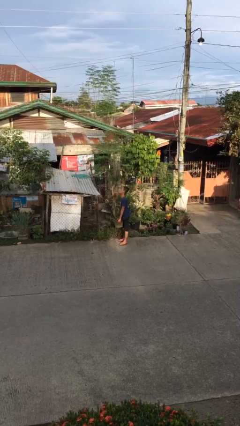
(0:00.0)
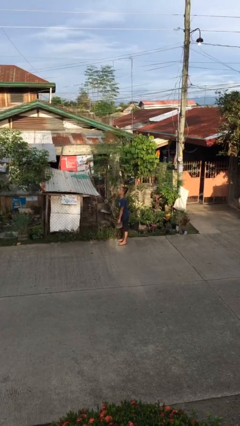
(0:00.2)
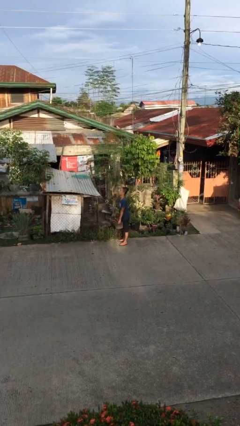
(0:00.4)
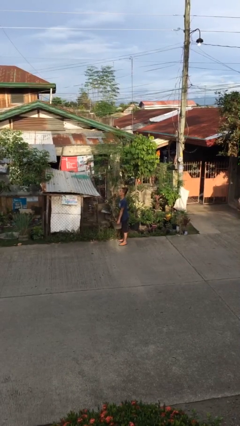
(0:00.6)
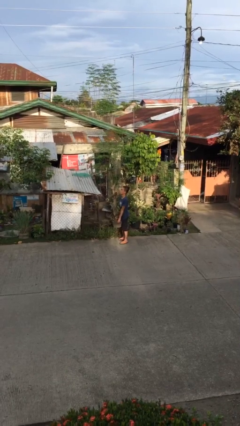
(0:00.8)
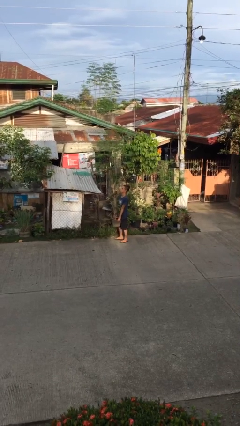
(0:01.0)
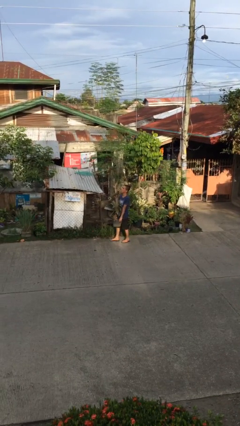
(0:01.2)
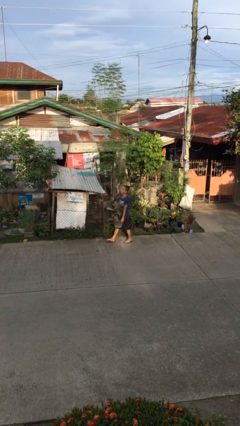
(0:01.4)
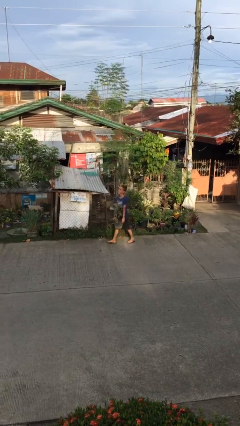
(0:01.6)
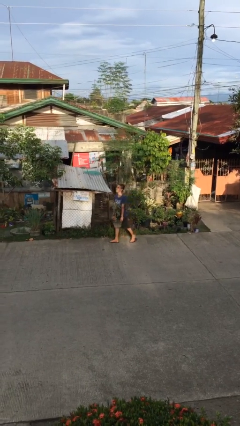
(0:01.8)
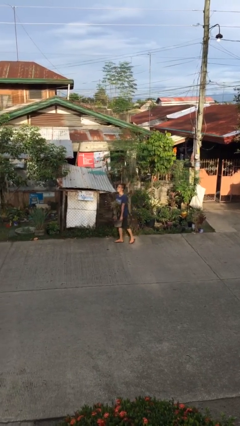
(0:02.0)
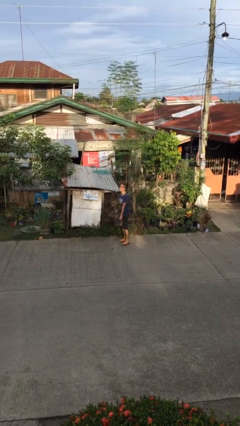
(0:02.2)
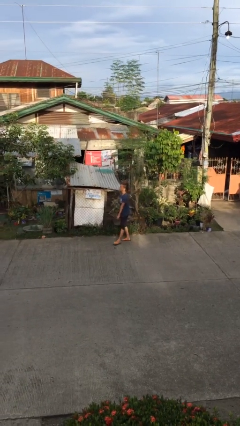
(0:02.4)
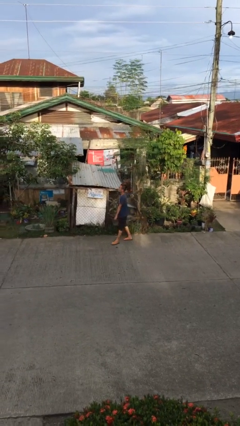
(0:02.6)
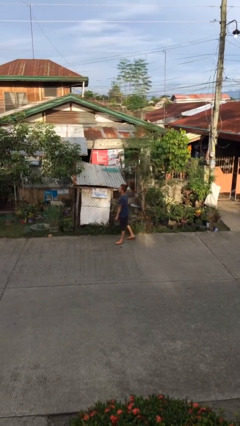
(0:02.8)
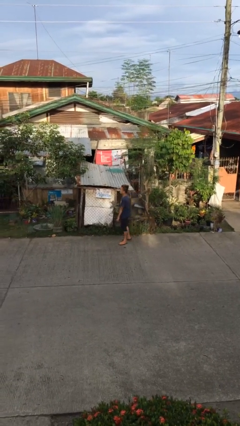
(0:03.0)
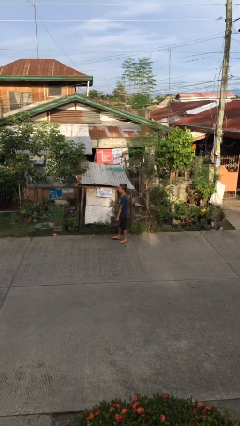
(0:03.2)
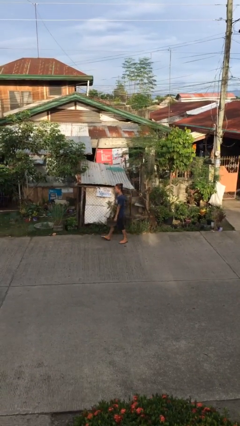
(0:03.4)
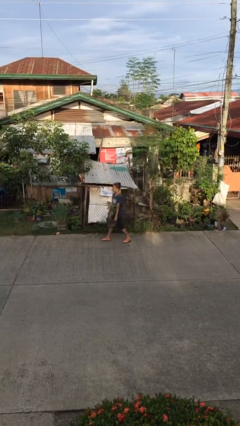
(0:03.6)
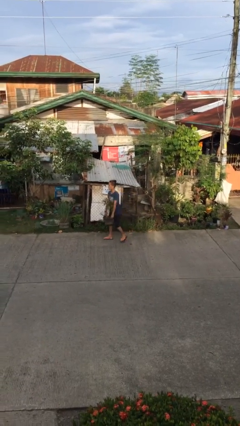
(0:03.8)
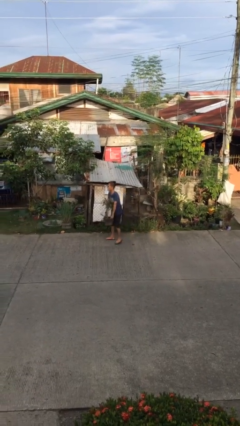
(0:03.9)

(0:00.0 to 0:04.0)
person carries heavy object

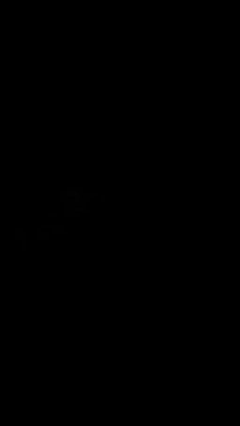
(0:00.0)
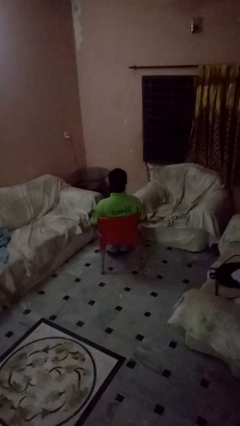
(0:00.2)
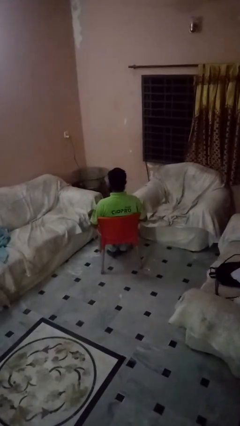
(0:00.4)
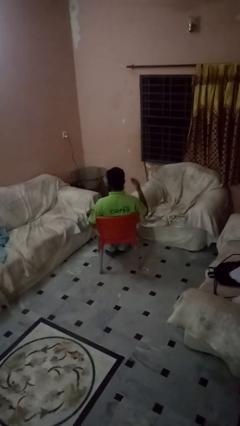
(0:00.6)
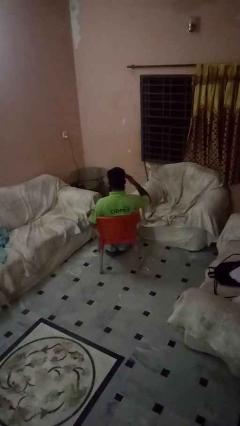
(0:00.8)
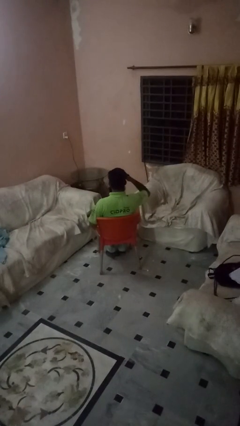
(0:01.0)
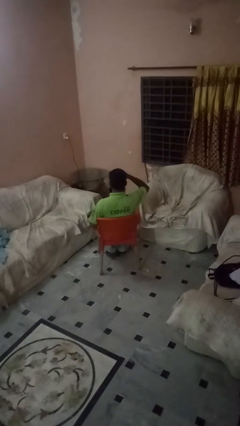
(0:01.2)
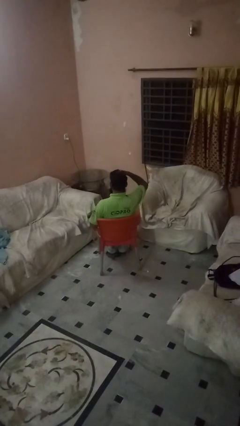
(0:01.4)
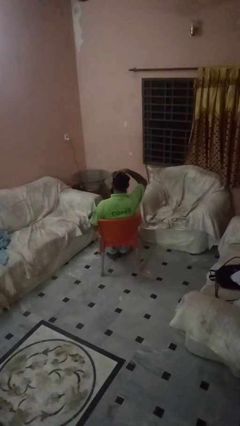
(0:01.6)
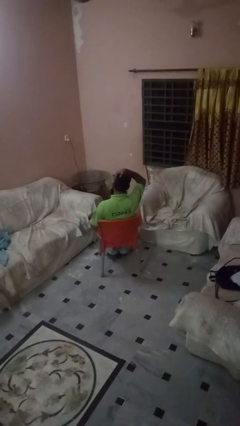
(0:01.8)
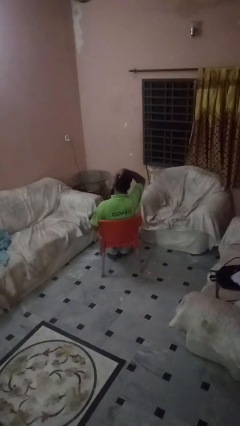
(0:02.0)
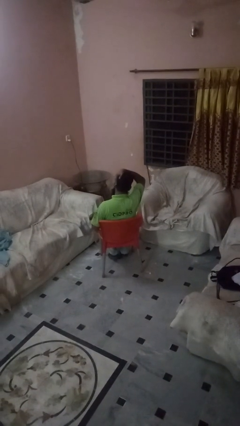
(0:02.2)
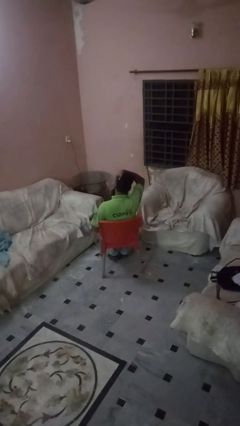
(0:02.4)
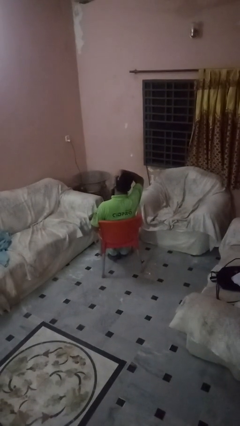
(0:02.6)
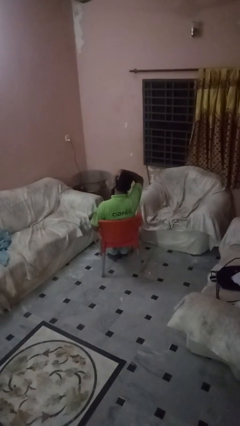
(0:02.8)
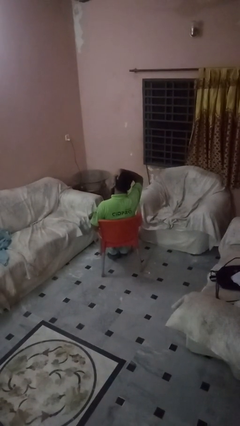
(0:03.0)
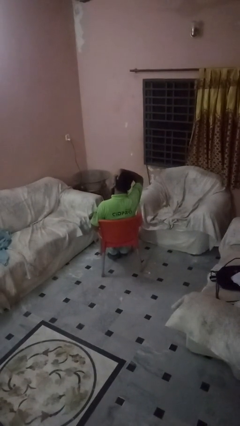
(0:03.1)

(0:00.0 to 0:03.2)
person strokes hair

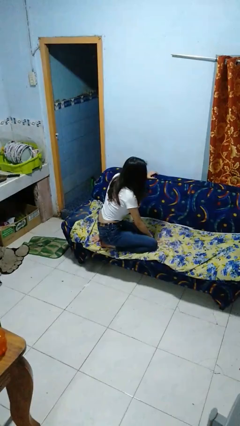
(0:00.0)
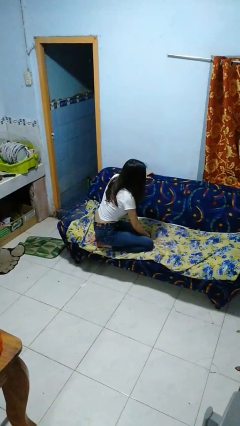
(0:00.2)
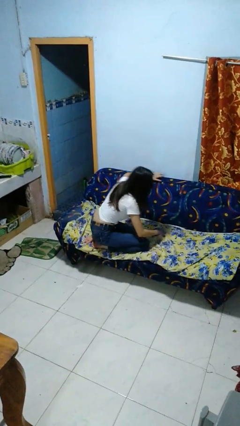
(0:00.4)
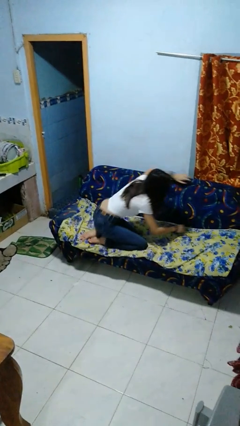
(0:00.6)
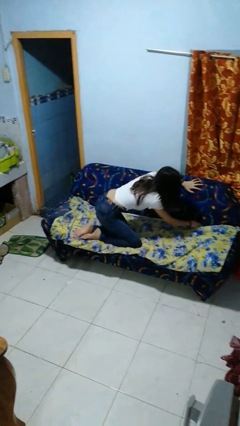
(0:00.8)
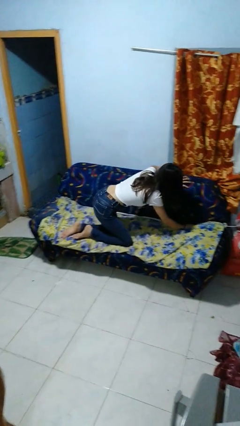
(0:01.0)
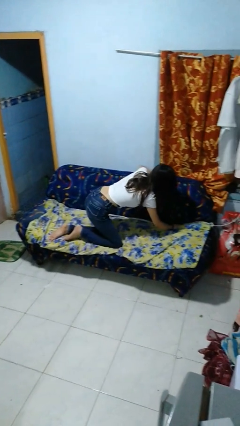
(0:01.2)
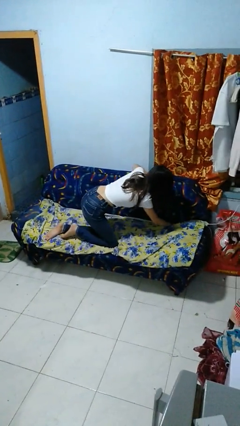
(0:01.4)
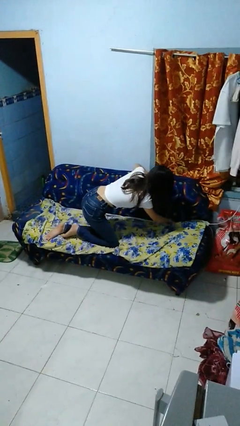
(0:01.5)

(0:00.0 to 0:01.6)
person searches in couch

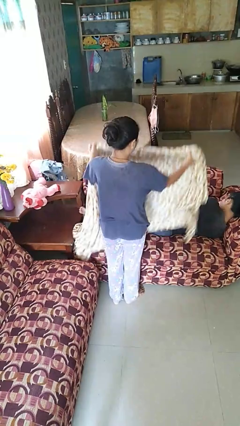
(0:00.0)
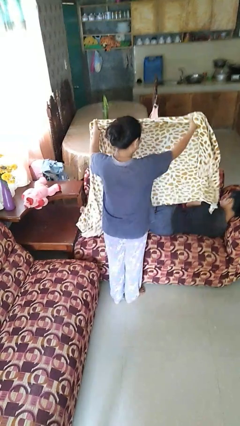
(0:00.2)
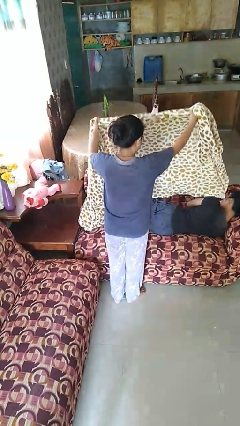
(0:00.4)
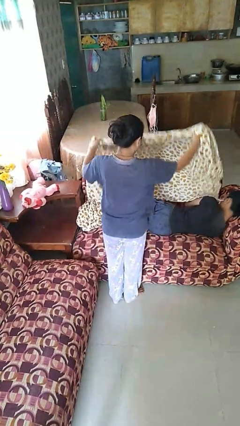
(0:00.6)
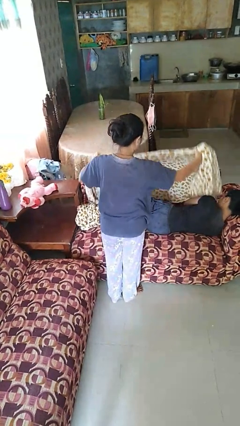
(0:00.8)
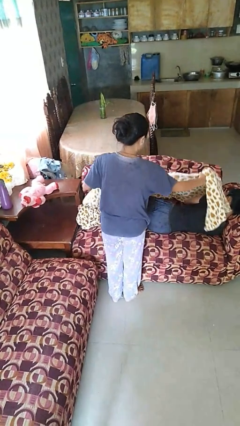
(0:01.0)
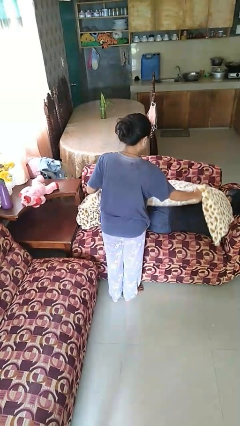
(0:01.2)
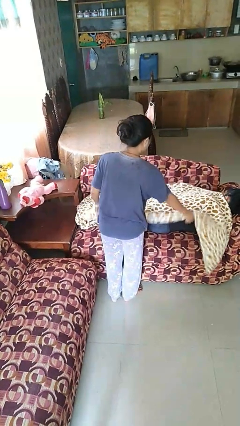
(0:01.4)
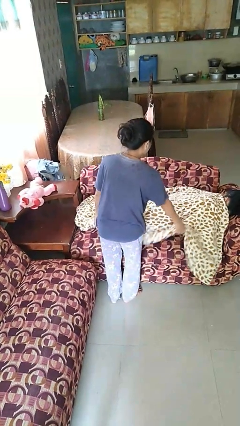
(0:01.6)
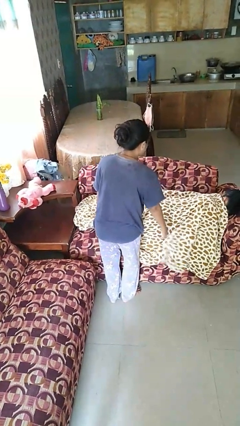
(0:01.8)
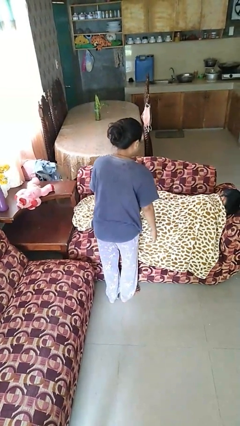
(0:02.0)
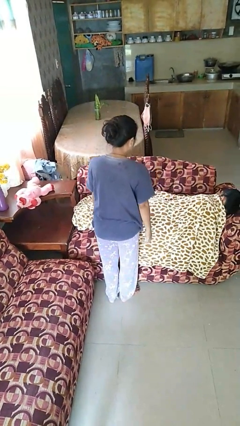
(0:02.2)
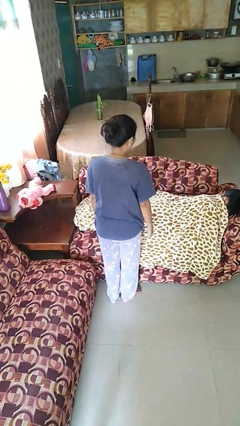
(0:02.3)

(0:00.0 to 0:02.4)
person covers friend with blanket

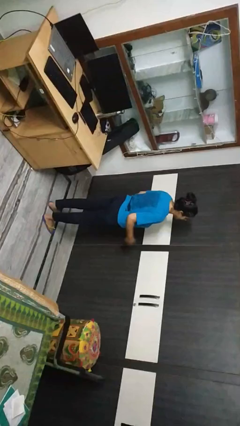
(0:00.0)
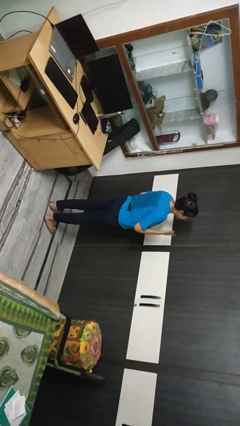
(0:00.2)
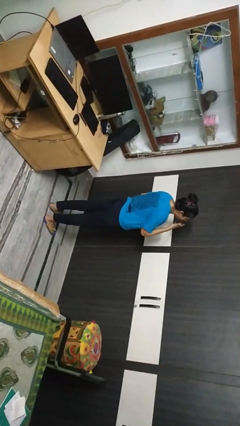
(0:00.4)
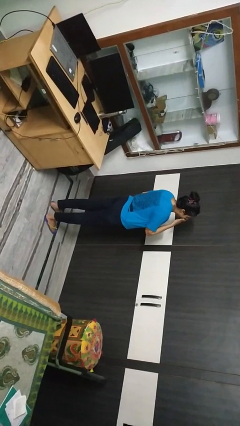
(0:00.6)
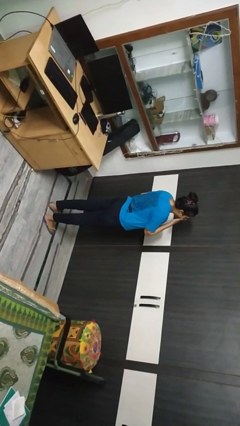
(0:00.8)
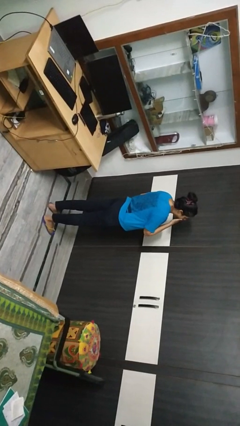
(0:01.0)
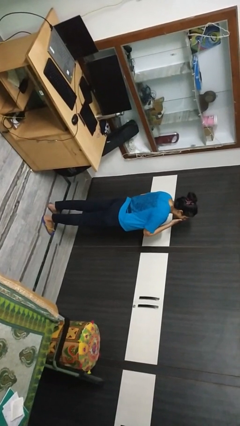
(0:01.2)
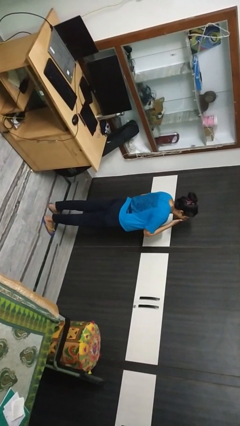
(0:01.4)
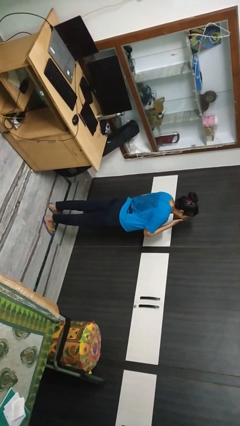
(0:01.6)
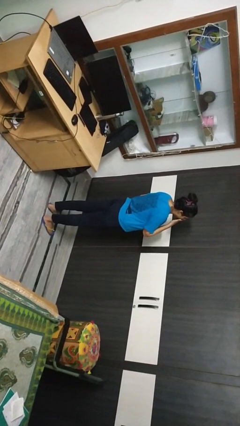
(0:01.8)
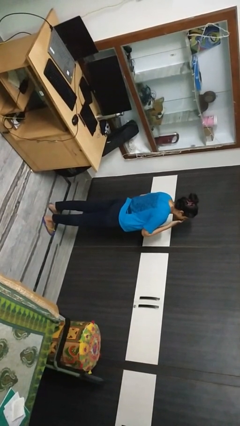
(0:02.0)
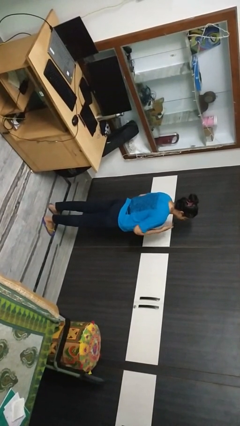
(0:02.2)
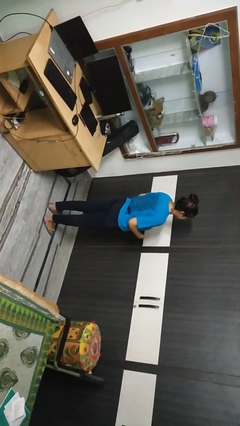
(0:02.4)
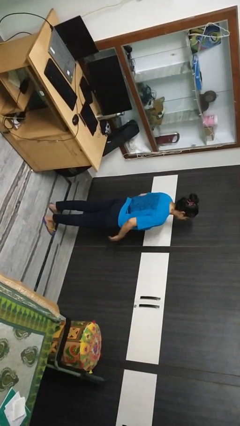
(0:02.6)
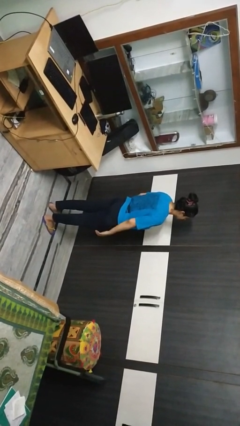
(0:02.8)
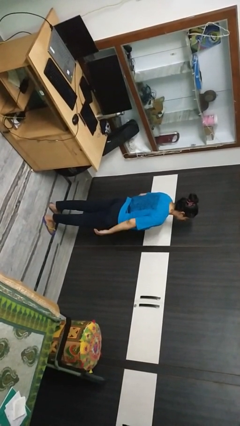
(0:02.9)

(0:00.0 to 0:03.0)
person yawns

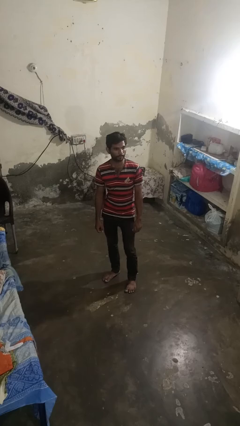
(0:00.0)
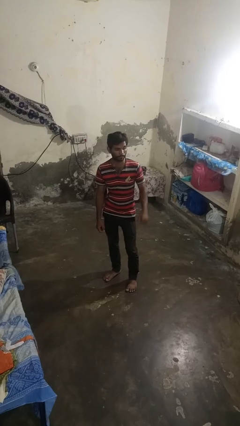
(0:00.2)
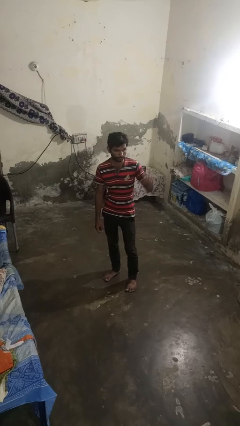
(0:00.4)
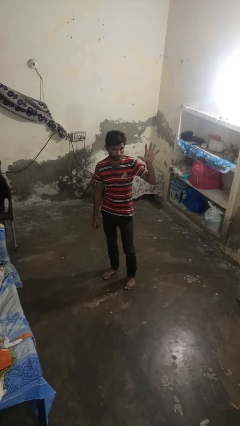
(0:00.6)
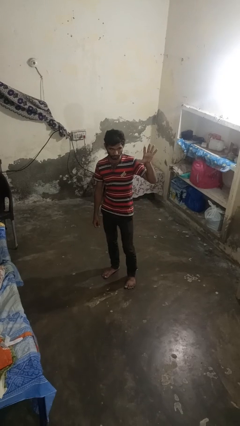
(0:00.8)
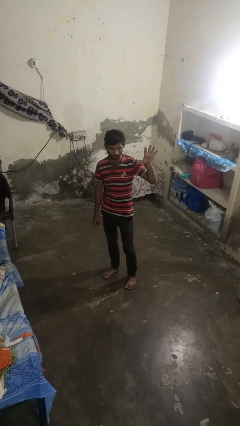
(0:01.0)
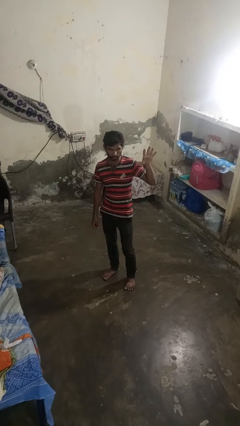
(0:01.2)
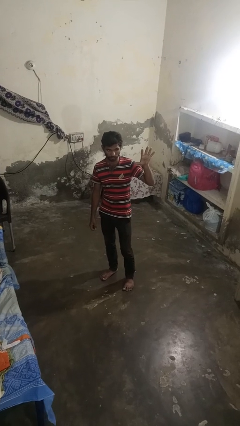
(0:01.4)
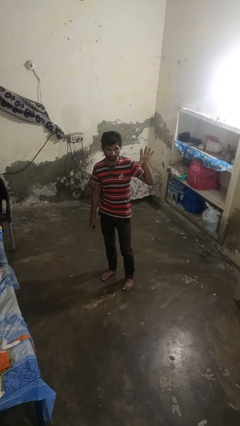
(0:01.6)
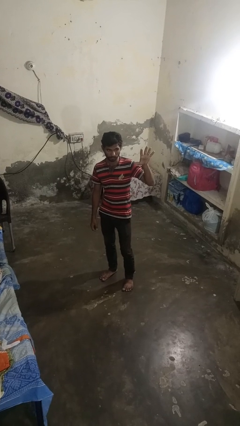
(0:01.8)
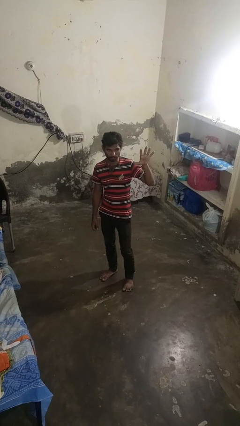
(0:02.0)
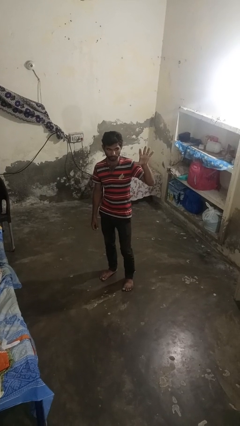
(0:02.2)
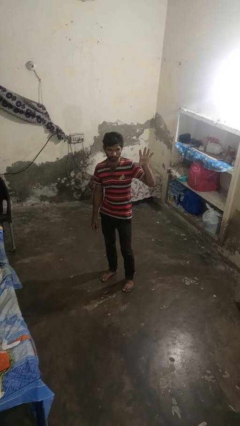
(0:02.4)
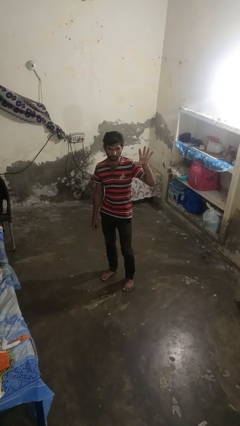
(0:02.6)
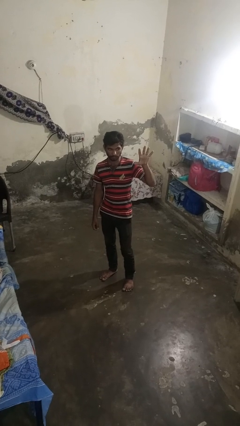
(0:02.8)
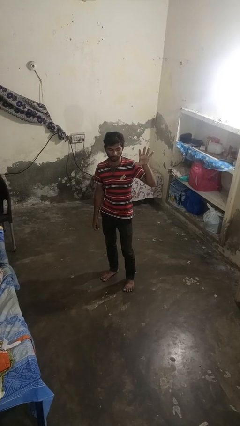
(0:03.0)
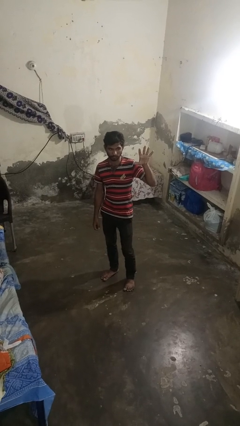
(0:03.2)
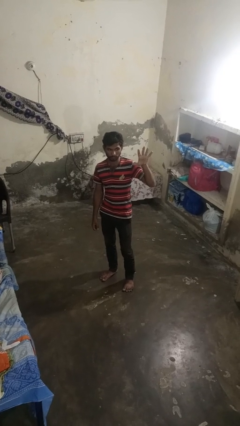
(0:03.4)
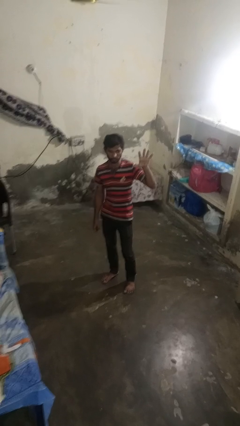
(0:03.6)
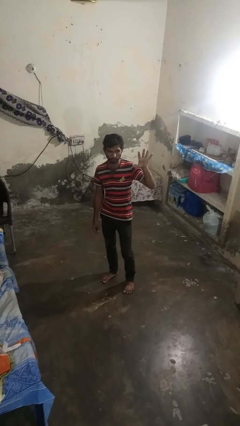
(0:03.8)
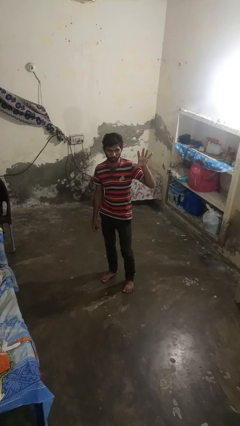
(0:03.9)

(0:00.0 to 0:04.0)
person gestures number five
